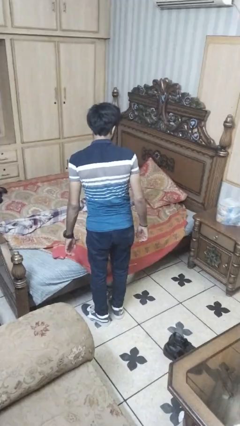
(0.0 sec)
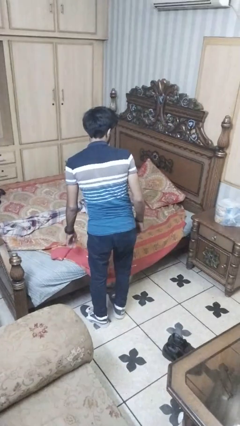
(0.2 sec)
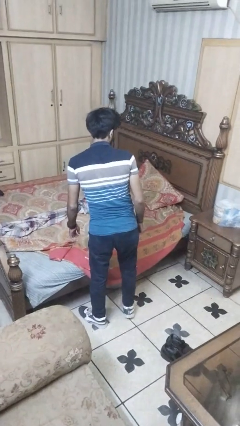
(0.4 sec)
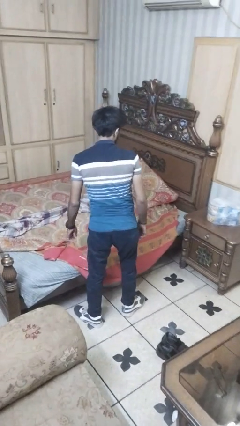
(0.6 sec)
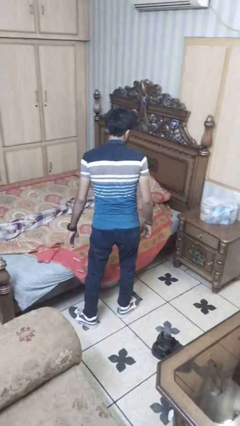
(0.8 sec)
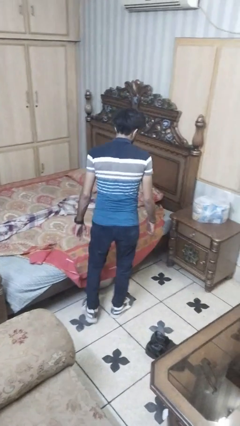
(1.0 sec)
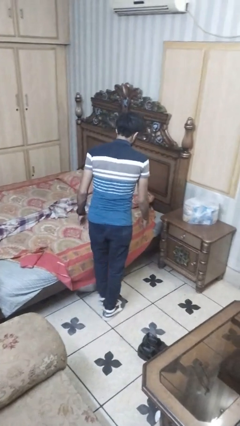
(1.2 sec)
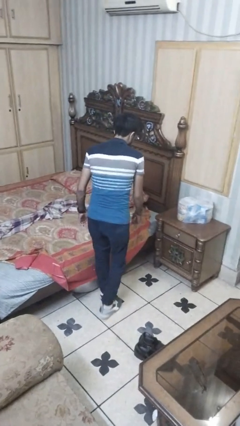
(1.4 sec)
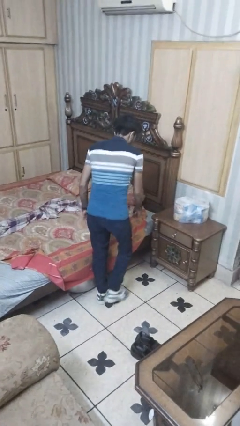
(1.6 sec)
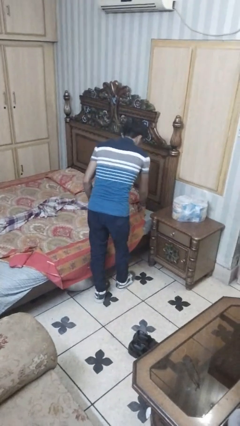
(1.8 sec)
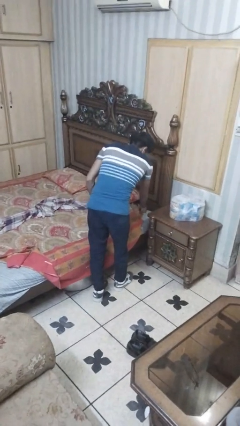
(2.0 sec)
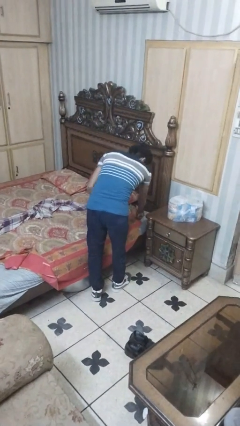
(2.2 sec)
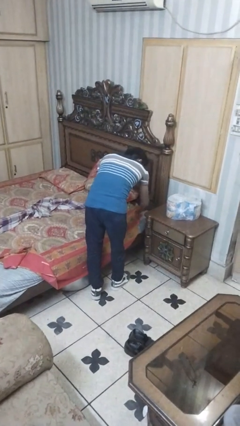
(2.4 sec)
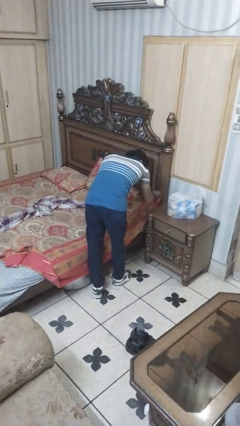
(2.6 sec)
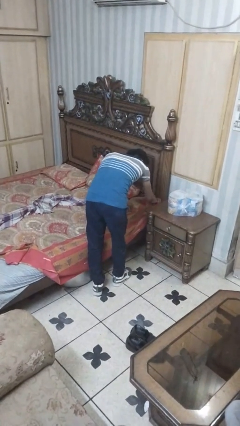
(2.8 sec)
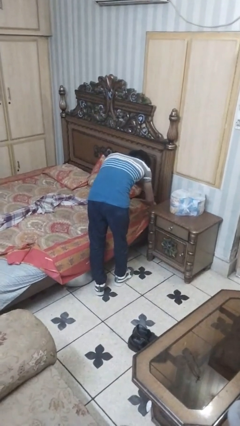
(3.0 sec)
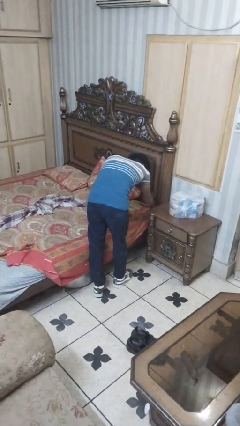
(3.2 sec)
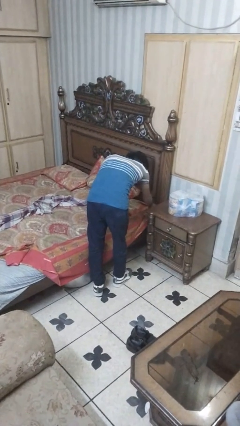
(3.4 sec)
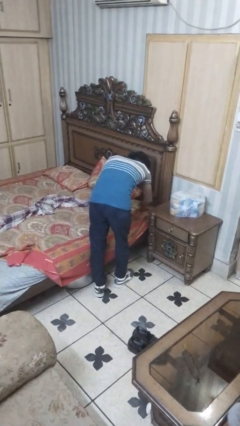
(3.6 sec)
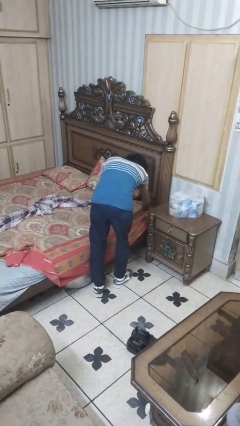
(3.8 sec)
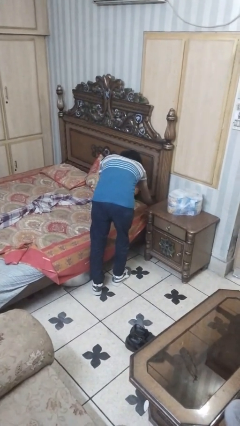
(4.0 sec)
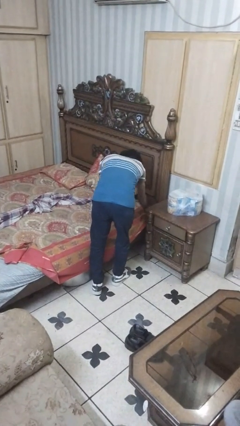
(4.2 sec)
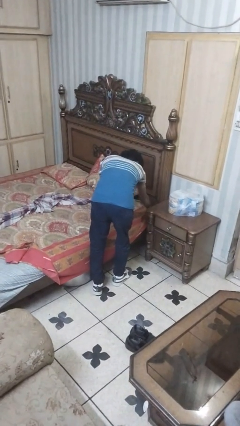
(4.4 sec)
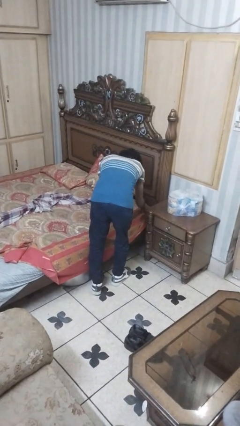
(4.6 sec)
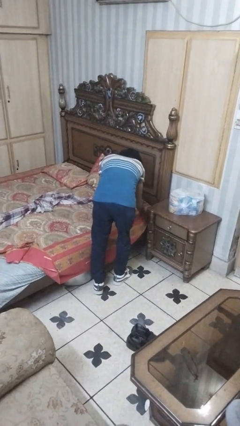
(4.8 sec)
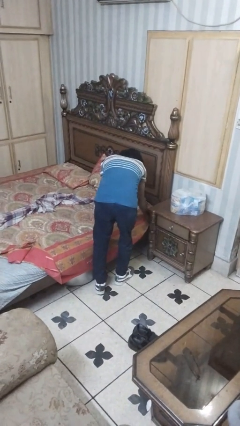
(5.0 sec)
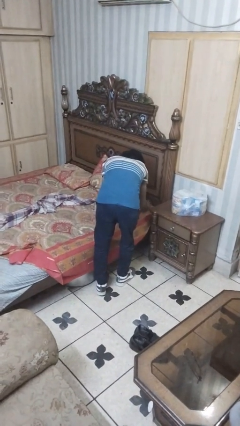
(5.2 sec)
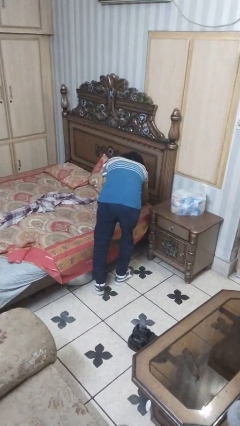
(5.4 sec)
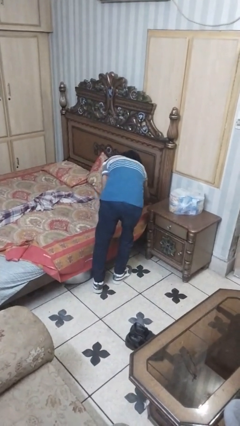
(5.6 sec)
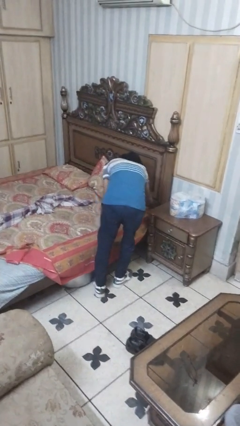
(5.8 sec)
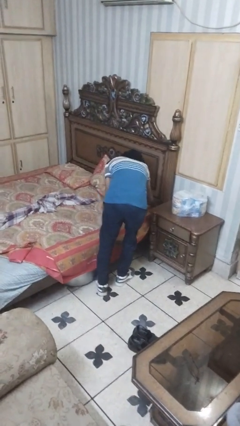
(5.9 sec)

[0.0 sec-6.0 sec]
person makes bed

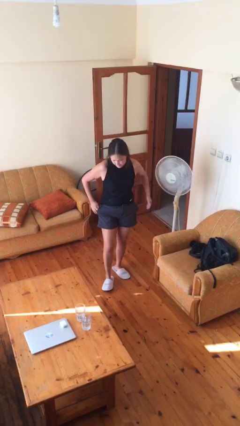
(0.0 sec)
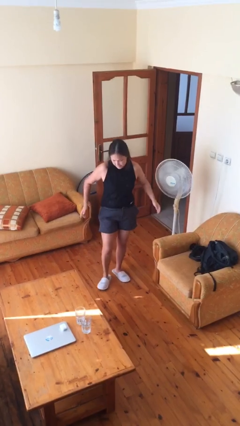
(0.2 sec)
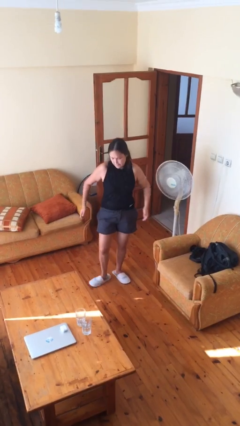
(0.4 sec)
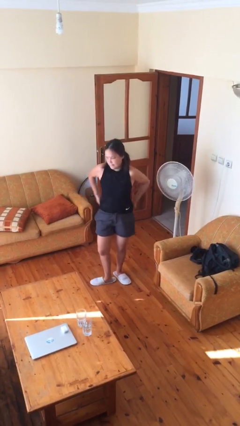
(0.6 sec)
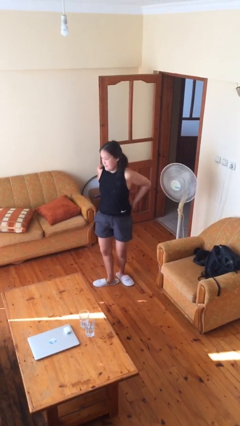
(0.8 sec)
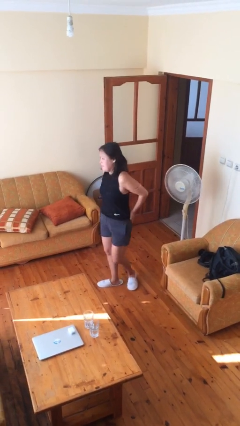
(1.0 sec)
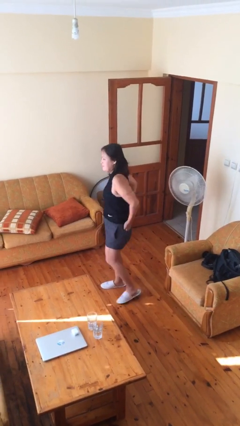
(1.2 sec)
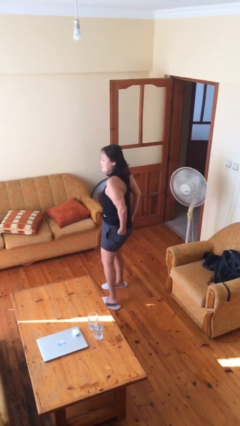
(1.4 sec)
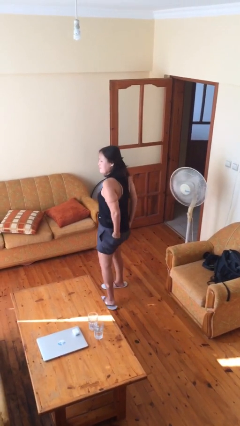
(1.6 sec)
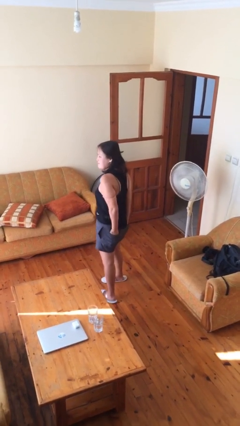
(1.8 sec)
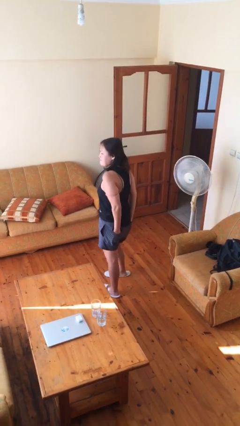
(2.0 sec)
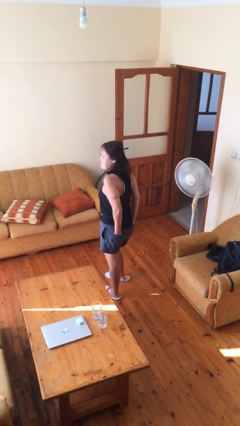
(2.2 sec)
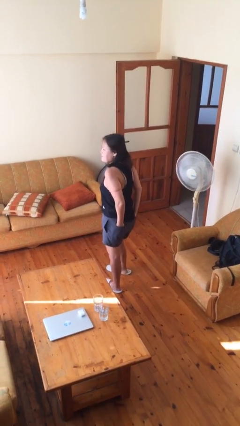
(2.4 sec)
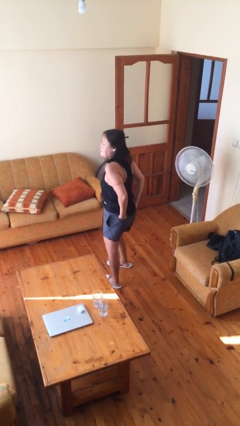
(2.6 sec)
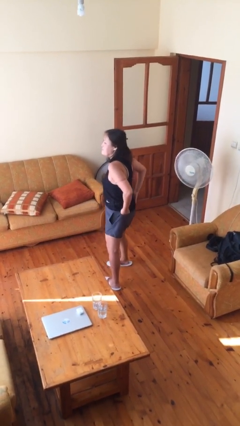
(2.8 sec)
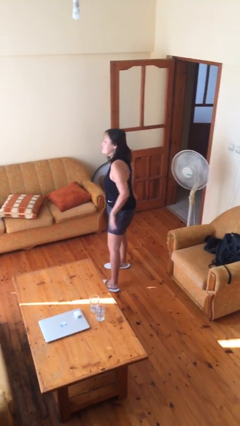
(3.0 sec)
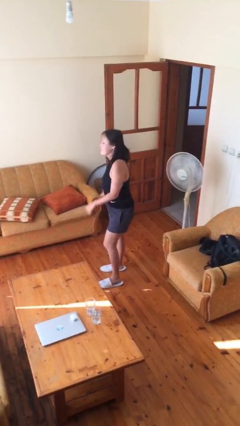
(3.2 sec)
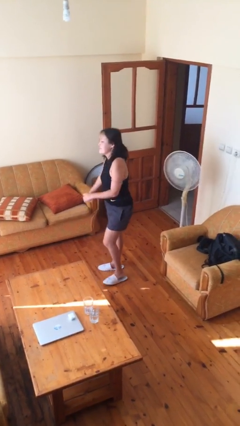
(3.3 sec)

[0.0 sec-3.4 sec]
person puts hands in back pockets

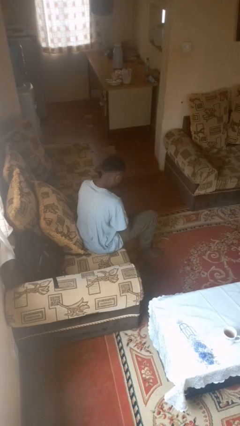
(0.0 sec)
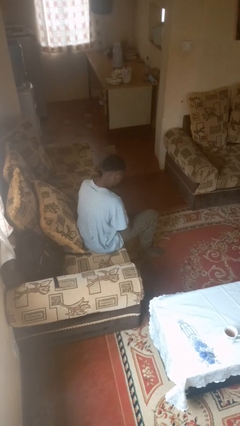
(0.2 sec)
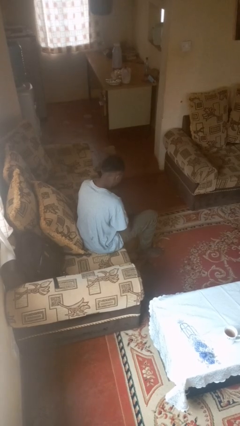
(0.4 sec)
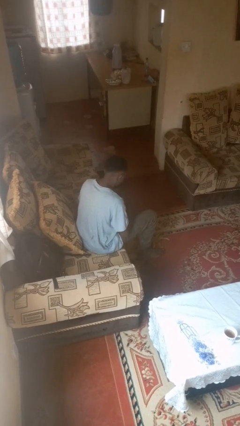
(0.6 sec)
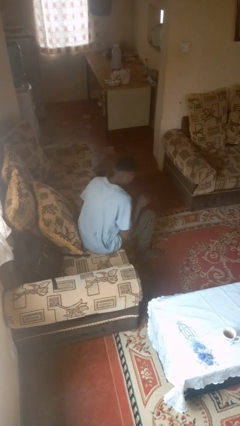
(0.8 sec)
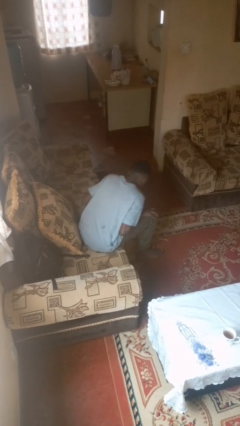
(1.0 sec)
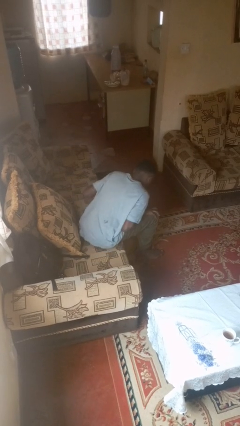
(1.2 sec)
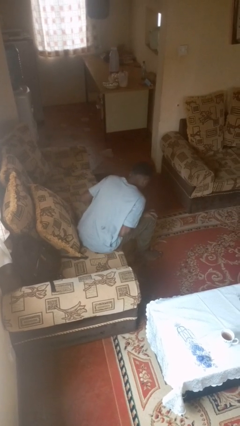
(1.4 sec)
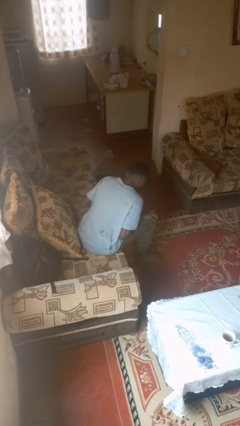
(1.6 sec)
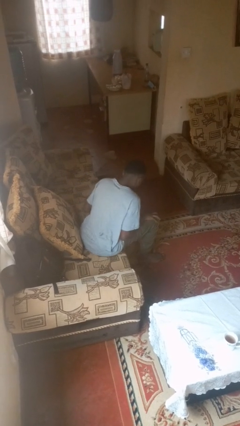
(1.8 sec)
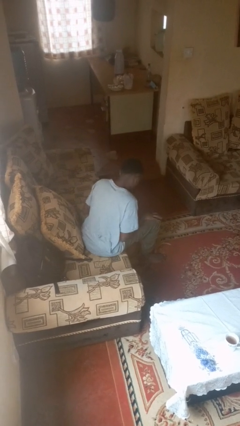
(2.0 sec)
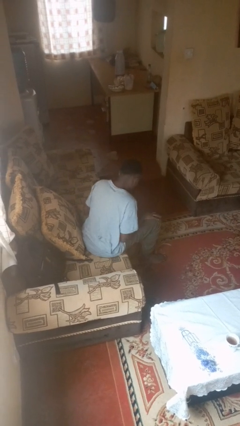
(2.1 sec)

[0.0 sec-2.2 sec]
person slaps hands on thighs

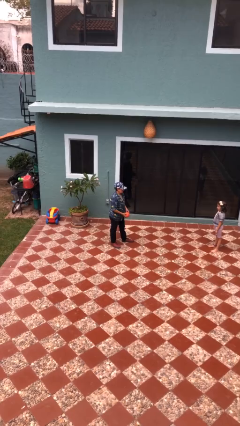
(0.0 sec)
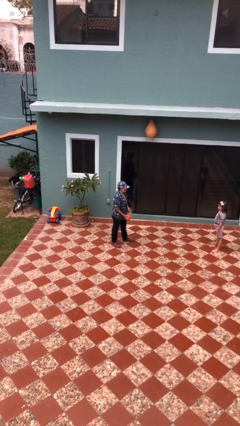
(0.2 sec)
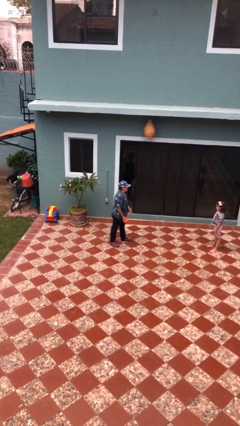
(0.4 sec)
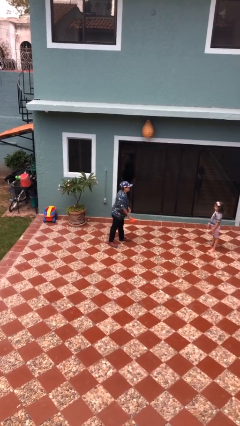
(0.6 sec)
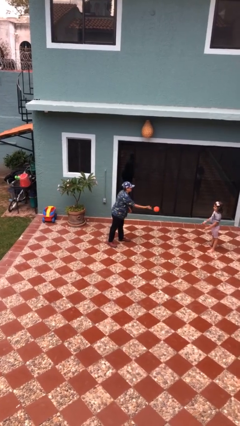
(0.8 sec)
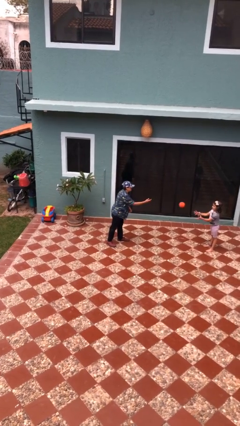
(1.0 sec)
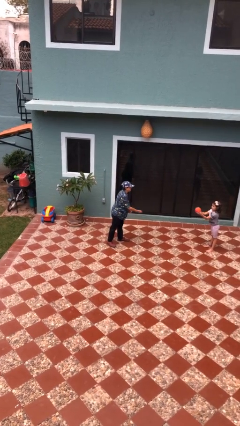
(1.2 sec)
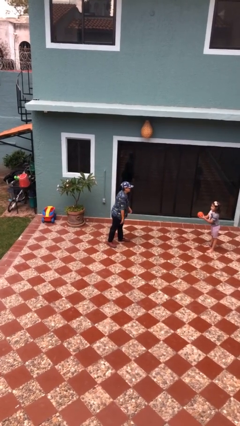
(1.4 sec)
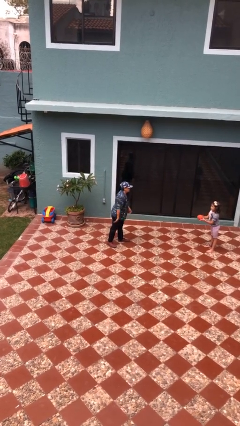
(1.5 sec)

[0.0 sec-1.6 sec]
person throws object to person

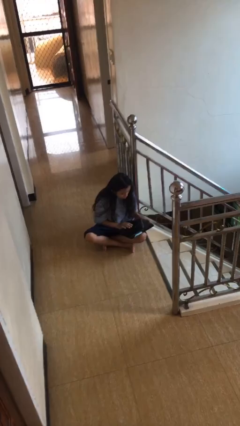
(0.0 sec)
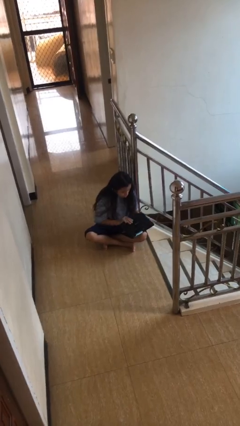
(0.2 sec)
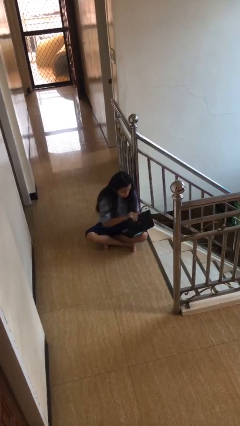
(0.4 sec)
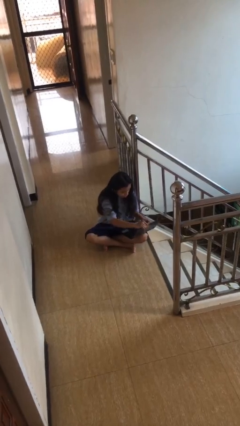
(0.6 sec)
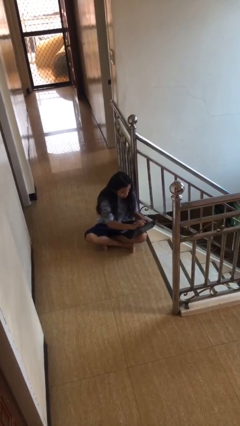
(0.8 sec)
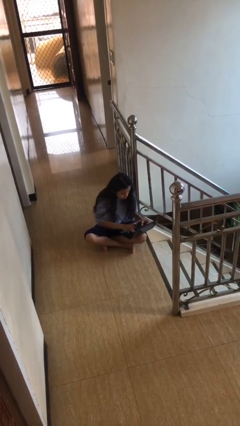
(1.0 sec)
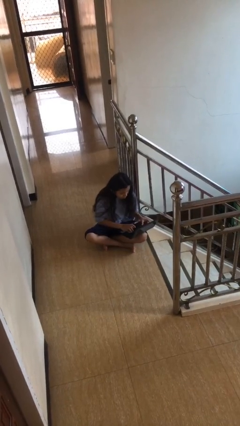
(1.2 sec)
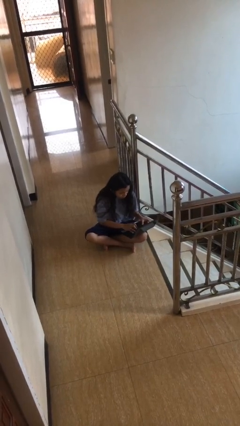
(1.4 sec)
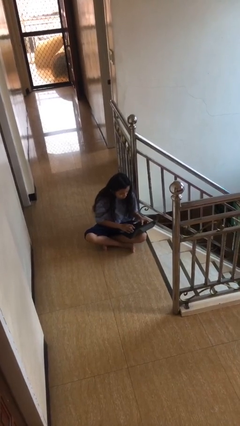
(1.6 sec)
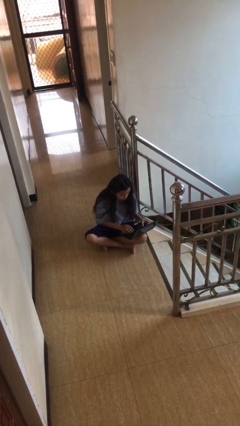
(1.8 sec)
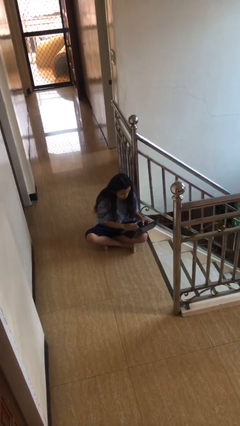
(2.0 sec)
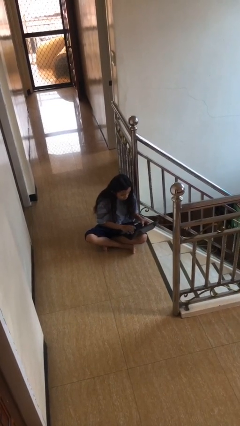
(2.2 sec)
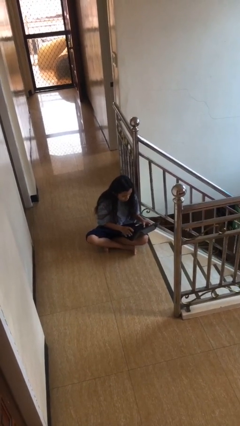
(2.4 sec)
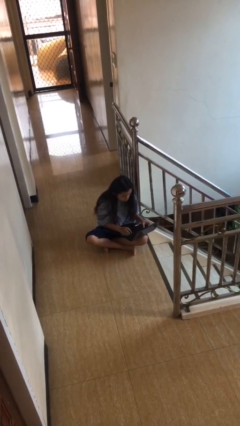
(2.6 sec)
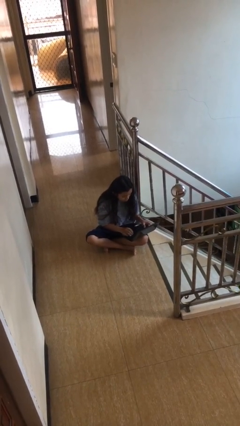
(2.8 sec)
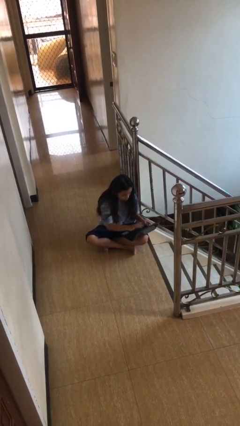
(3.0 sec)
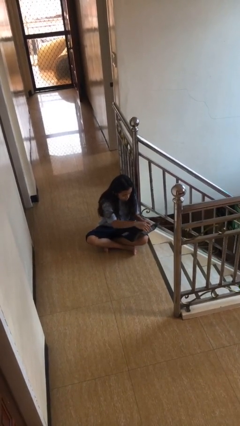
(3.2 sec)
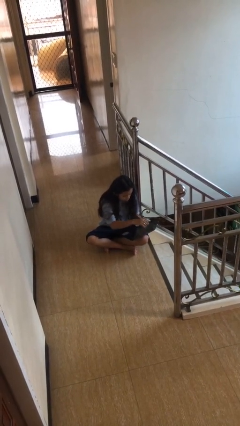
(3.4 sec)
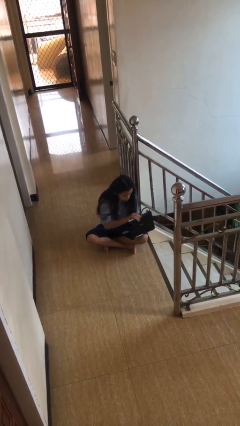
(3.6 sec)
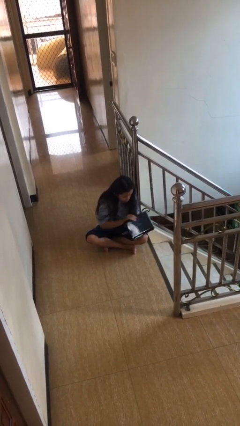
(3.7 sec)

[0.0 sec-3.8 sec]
person interacts with laptop

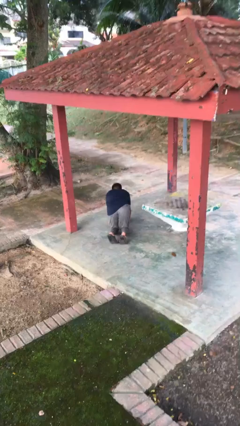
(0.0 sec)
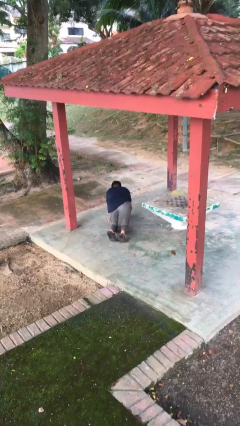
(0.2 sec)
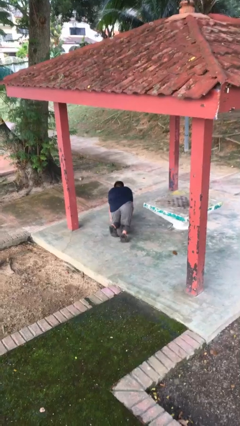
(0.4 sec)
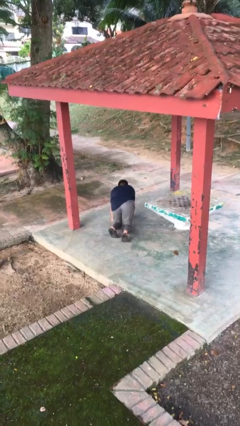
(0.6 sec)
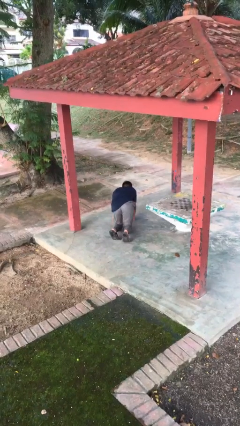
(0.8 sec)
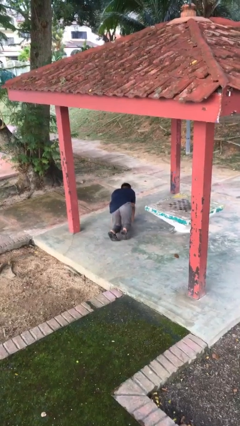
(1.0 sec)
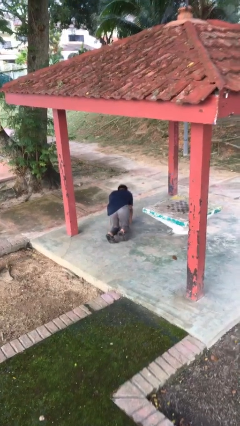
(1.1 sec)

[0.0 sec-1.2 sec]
person crawls
